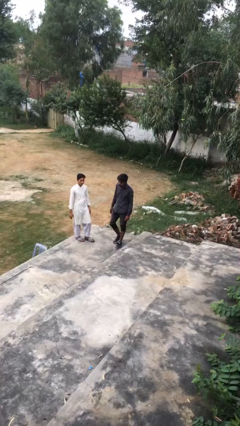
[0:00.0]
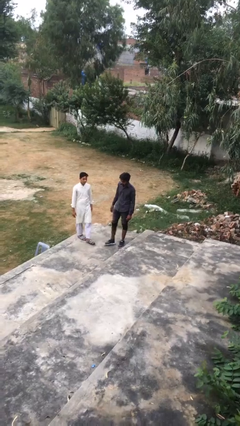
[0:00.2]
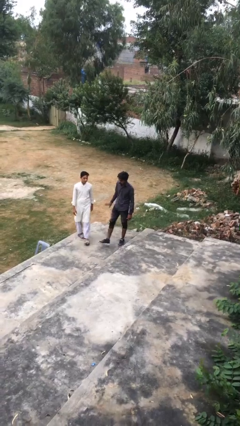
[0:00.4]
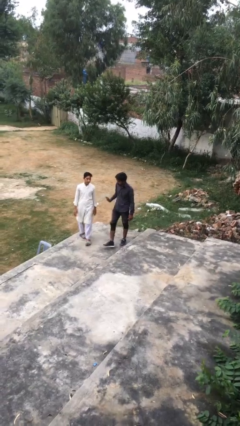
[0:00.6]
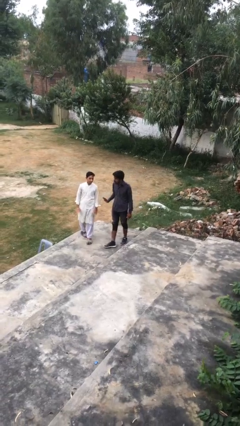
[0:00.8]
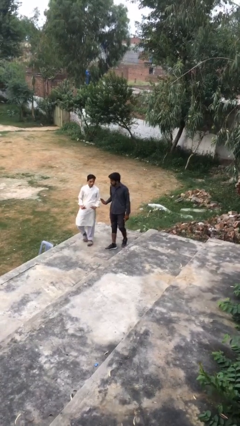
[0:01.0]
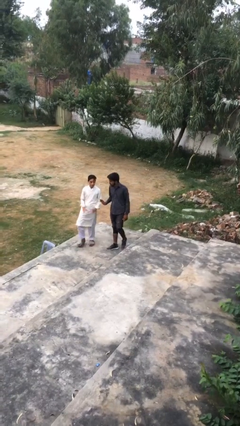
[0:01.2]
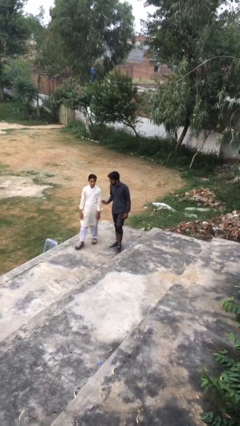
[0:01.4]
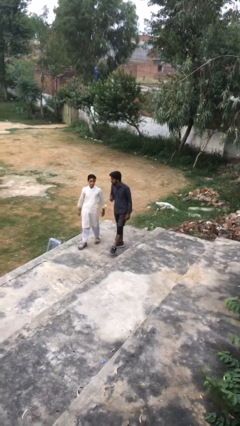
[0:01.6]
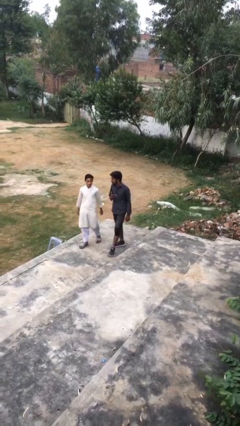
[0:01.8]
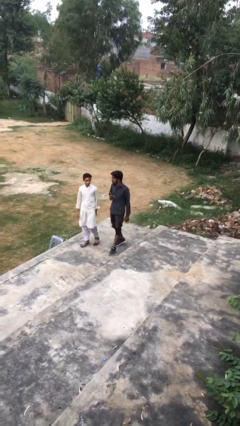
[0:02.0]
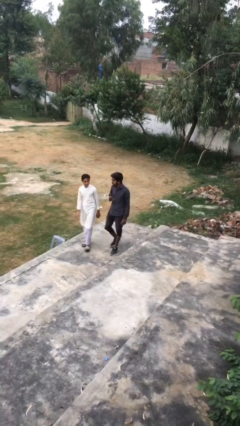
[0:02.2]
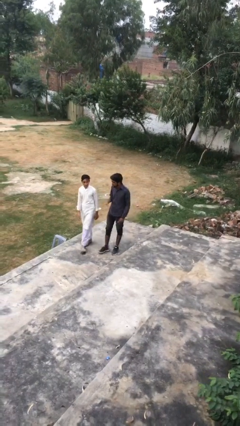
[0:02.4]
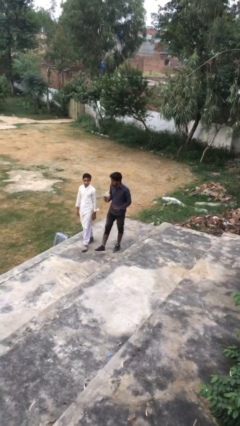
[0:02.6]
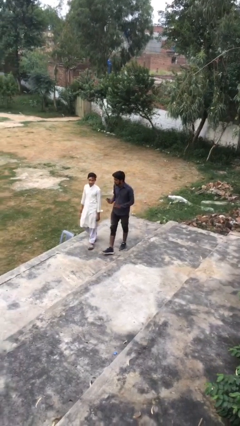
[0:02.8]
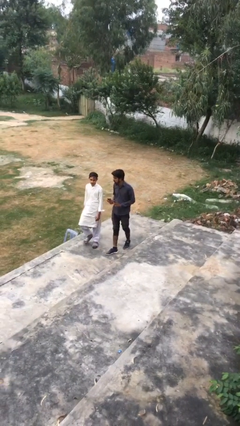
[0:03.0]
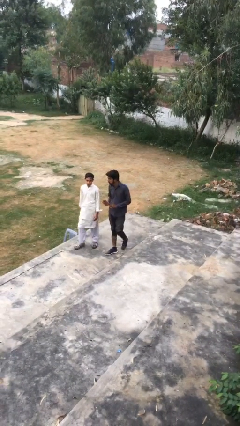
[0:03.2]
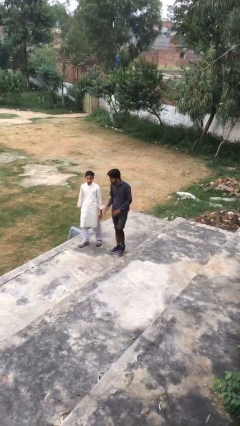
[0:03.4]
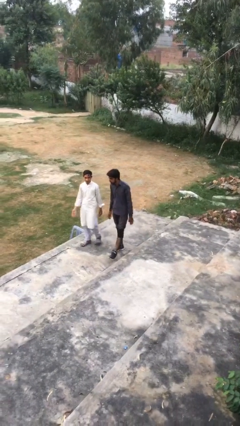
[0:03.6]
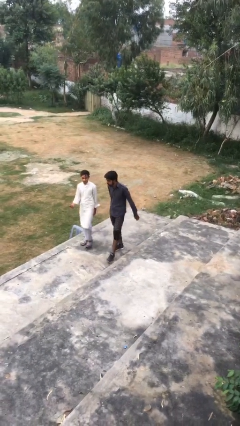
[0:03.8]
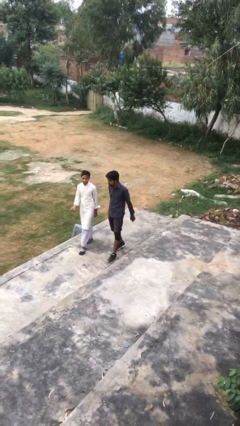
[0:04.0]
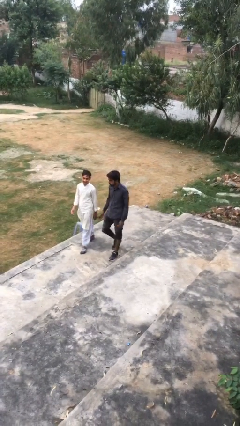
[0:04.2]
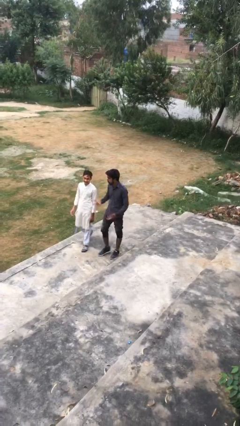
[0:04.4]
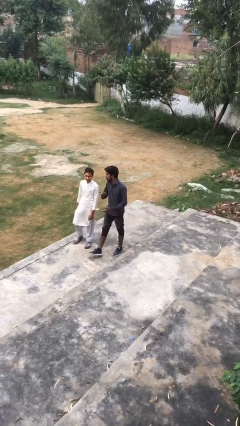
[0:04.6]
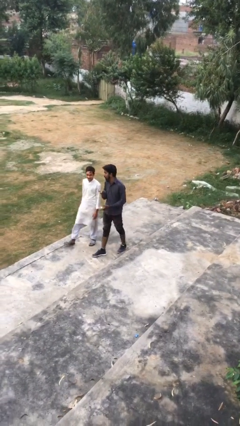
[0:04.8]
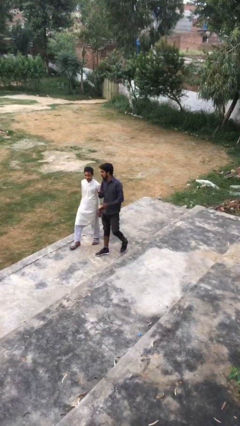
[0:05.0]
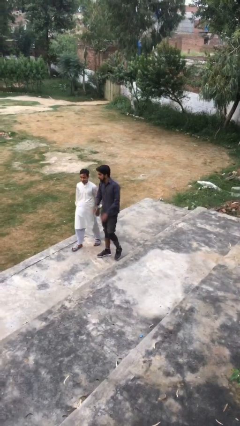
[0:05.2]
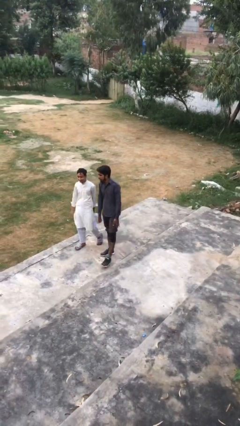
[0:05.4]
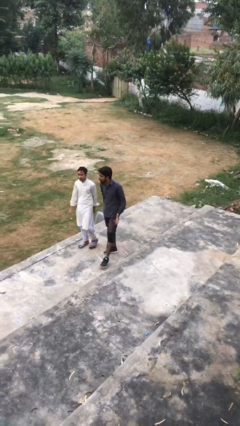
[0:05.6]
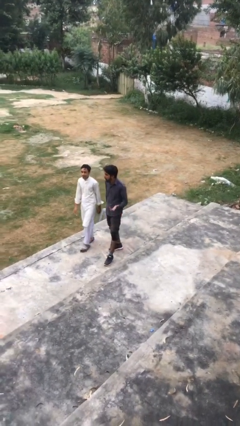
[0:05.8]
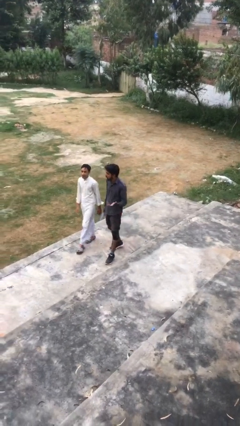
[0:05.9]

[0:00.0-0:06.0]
person talks to person

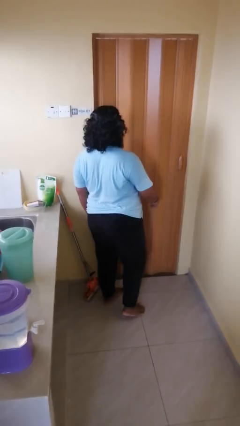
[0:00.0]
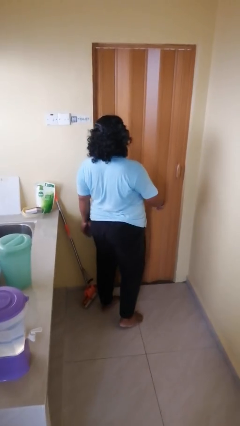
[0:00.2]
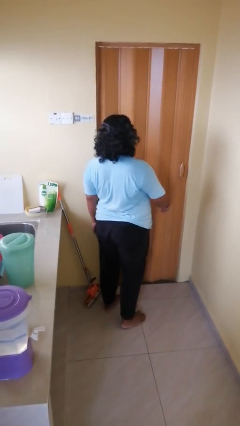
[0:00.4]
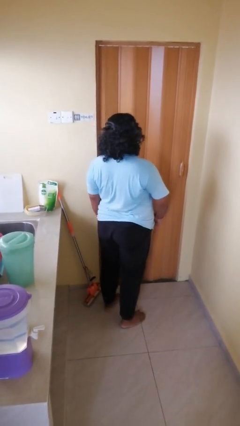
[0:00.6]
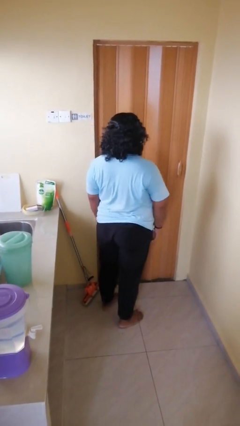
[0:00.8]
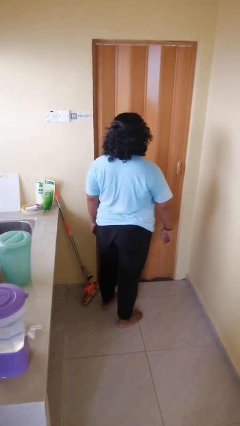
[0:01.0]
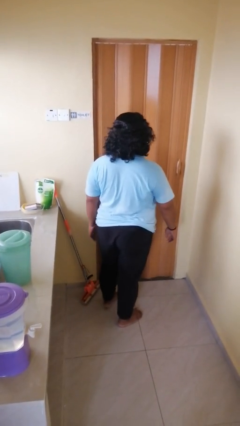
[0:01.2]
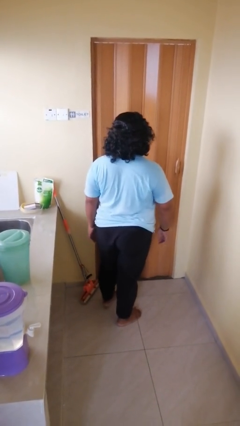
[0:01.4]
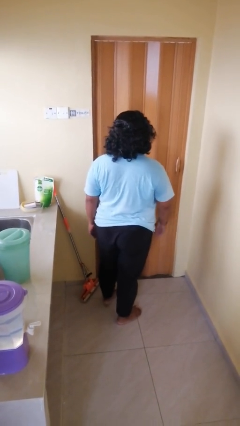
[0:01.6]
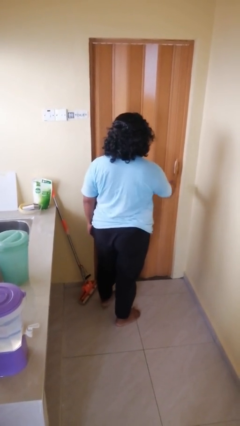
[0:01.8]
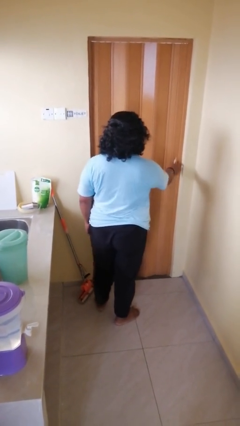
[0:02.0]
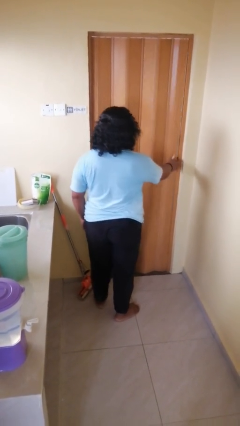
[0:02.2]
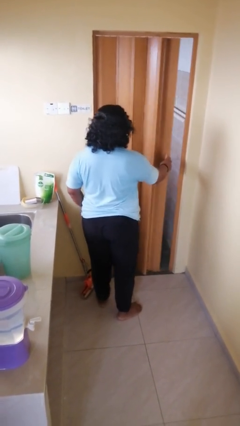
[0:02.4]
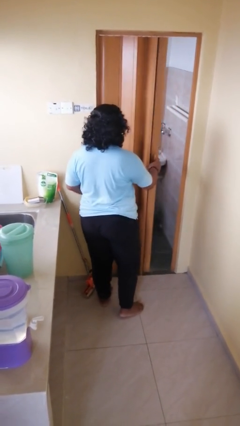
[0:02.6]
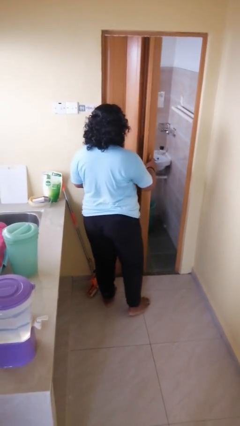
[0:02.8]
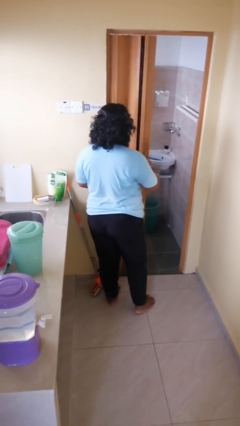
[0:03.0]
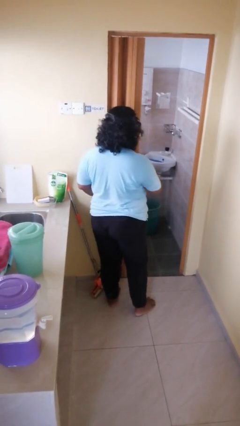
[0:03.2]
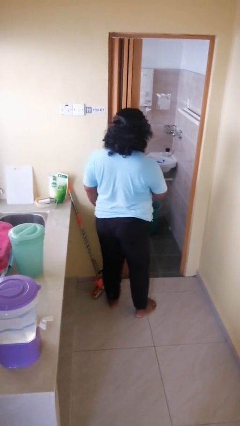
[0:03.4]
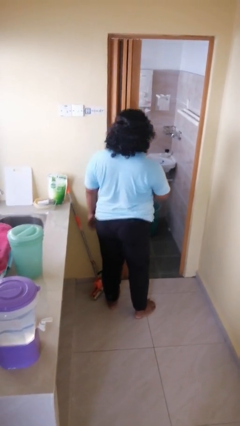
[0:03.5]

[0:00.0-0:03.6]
person opens sliding door

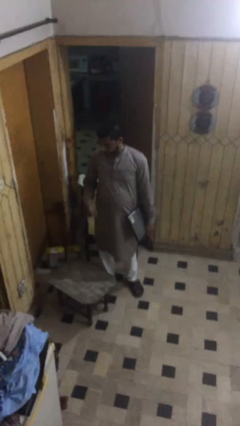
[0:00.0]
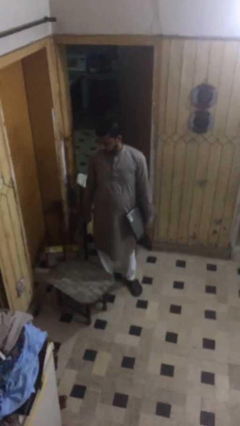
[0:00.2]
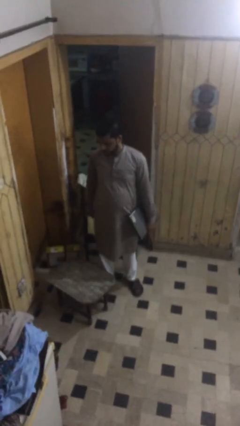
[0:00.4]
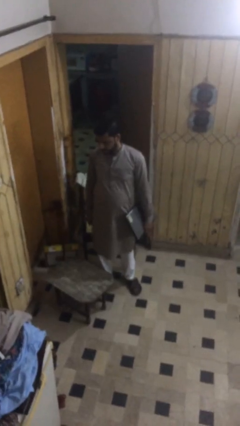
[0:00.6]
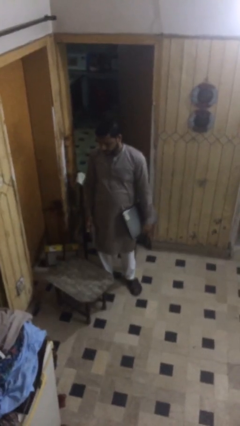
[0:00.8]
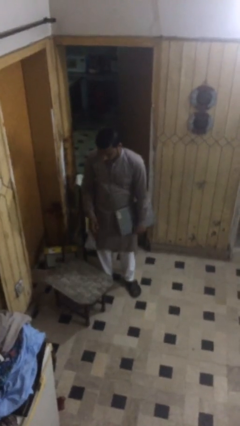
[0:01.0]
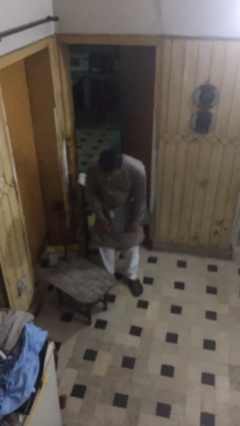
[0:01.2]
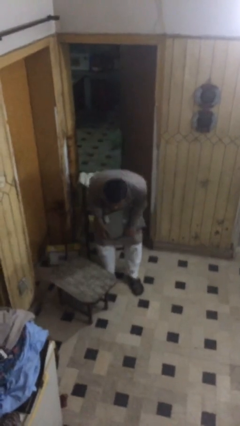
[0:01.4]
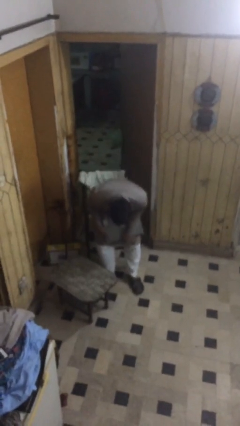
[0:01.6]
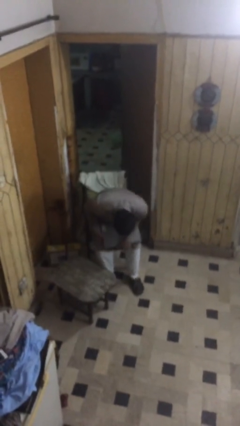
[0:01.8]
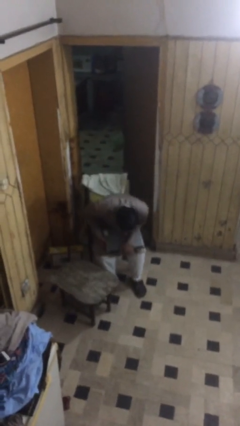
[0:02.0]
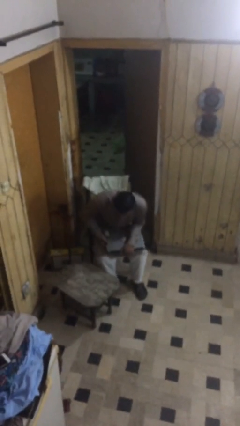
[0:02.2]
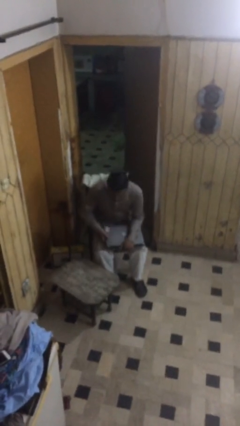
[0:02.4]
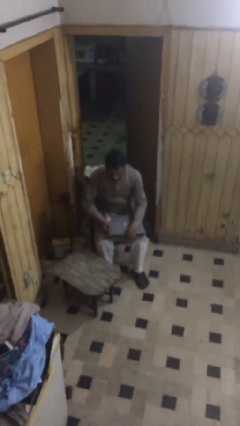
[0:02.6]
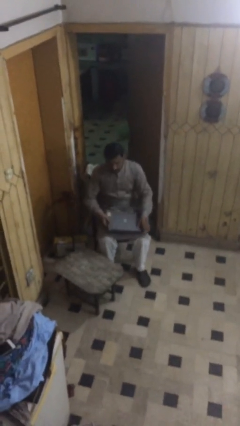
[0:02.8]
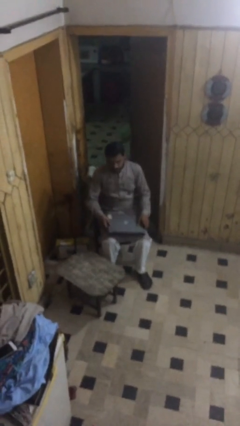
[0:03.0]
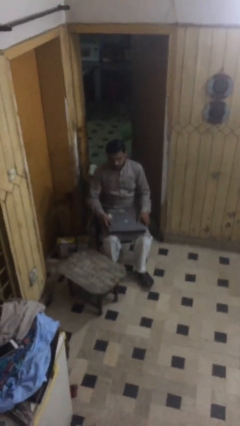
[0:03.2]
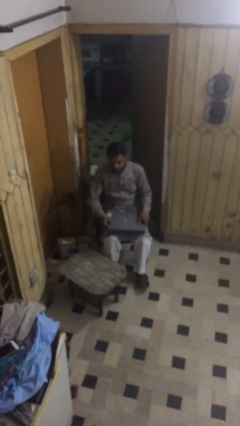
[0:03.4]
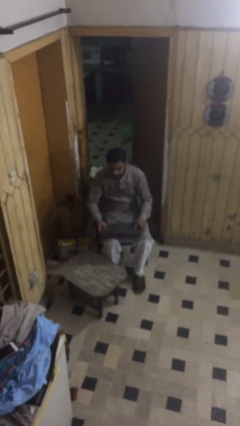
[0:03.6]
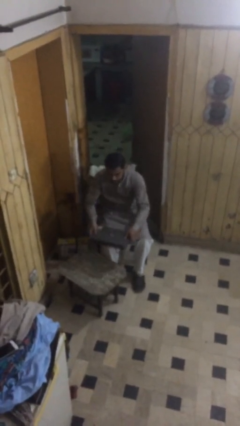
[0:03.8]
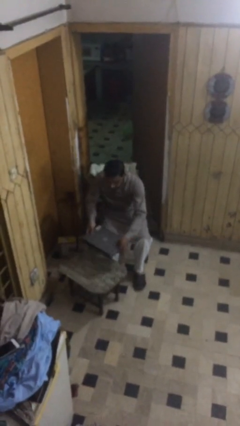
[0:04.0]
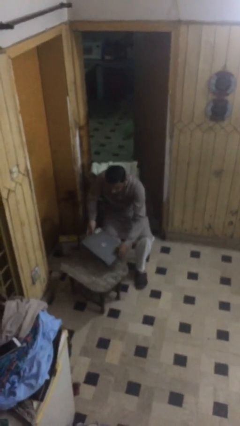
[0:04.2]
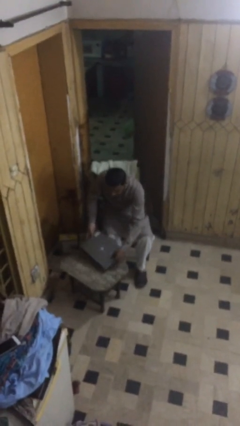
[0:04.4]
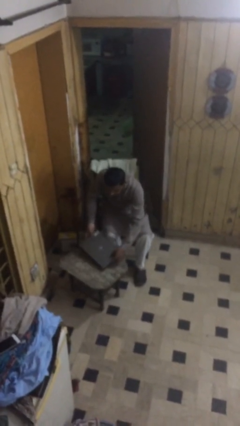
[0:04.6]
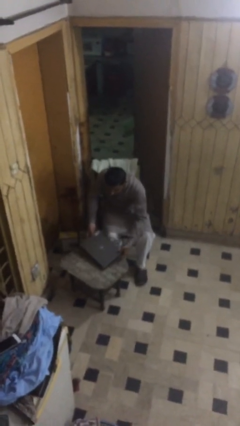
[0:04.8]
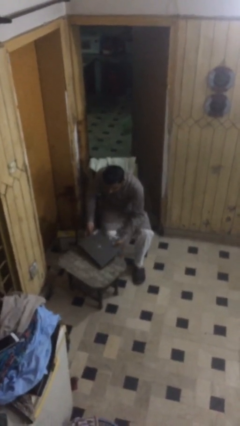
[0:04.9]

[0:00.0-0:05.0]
person sits down

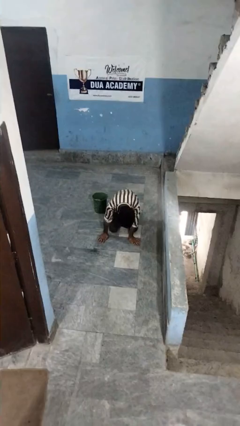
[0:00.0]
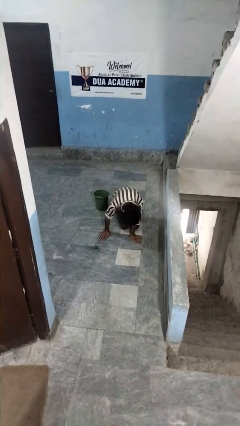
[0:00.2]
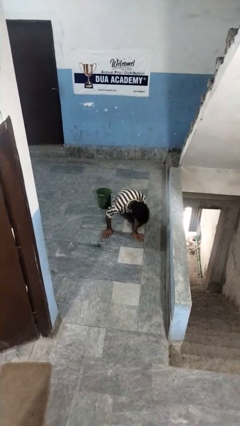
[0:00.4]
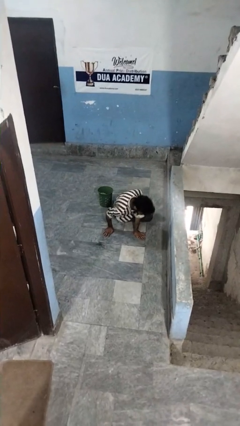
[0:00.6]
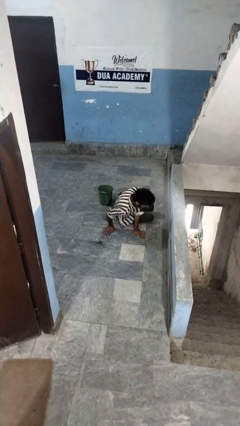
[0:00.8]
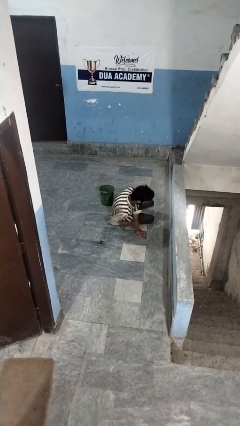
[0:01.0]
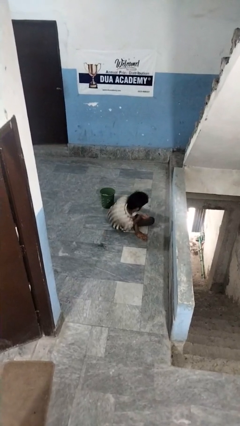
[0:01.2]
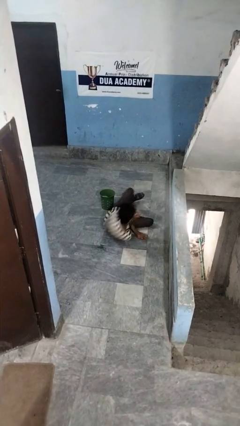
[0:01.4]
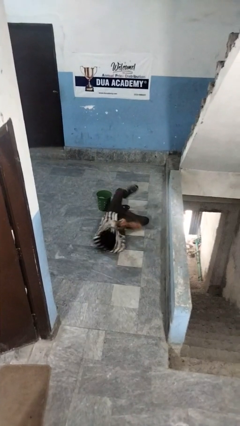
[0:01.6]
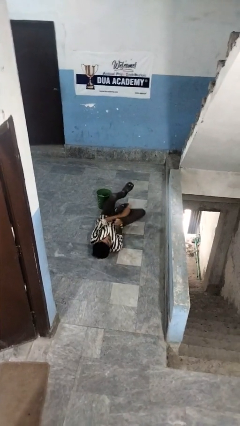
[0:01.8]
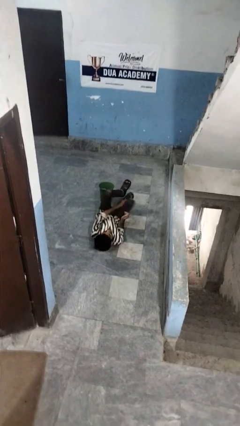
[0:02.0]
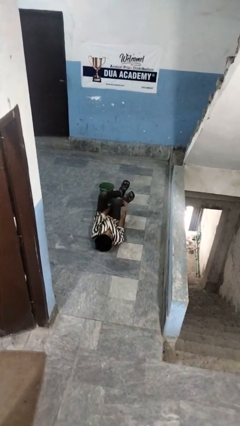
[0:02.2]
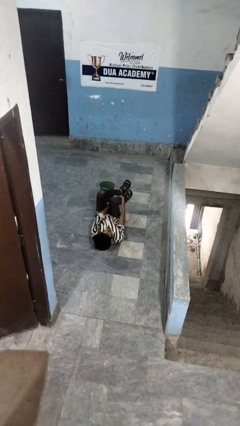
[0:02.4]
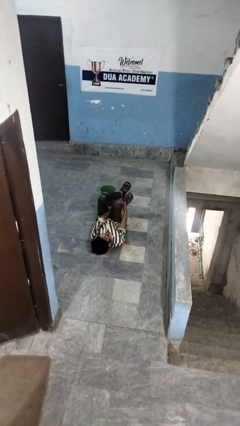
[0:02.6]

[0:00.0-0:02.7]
person lies down on floor

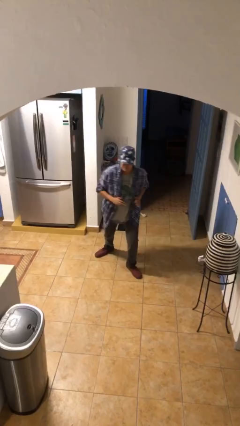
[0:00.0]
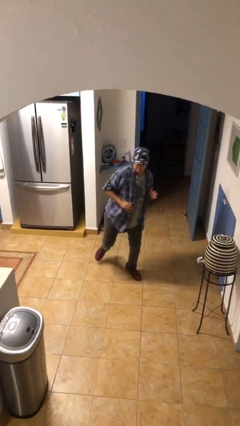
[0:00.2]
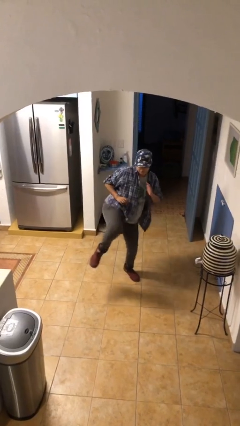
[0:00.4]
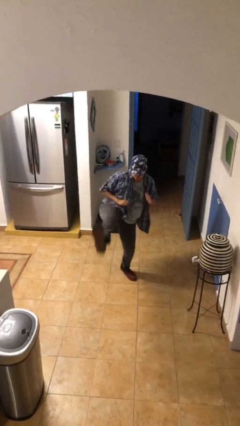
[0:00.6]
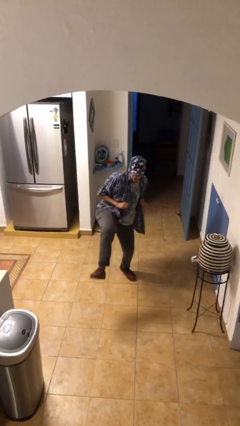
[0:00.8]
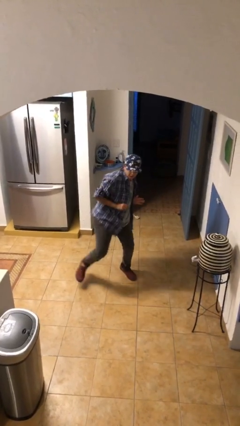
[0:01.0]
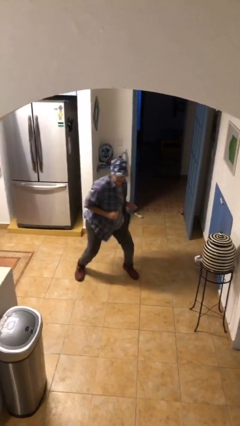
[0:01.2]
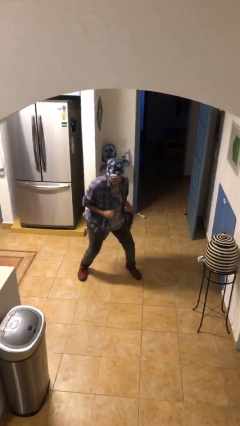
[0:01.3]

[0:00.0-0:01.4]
person karate kicks
